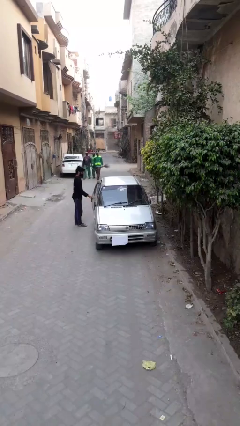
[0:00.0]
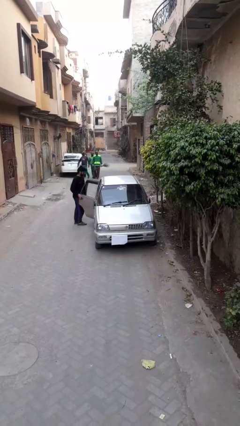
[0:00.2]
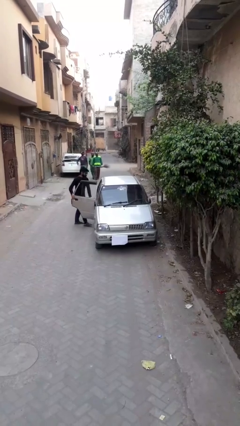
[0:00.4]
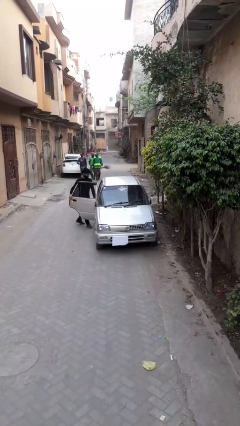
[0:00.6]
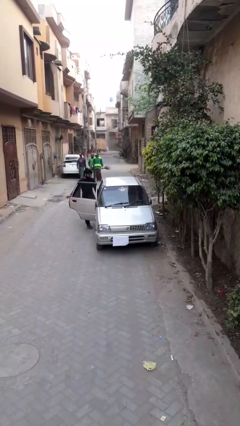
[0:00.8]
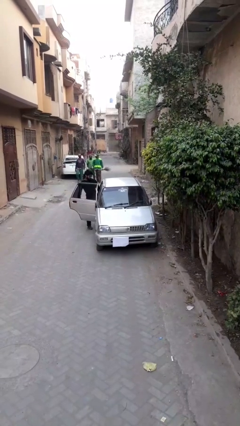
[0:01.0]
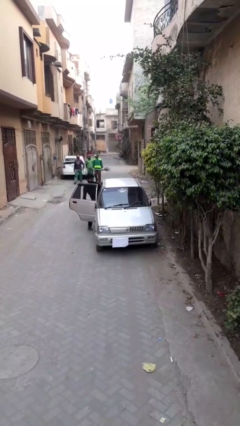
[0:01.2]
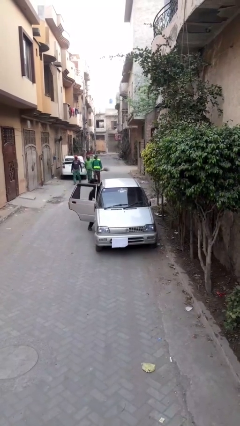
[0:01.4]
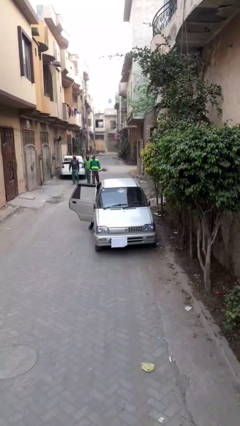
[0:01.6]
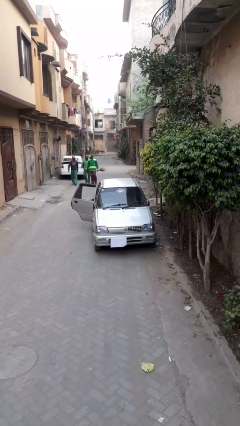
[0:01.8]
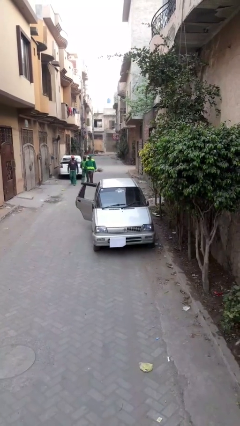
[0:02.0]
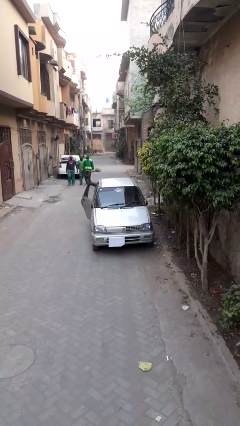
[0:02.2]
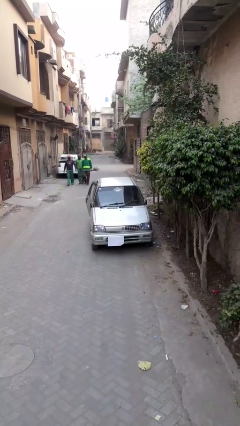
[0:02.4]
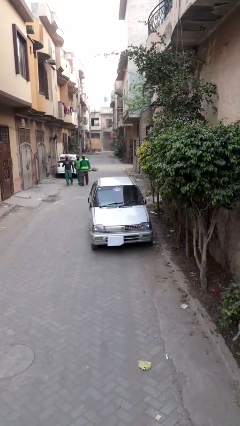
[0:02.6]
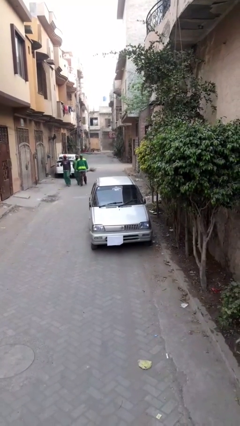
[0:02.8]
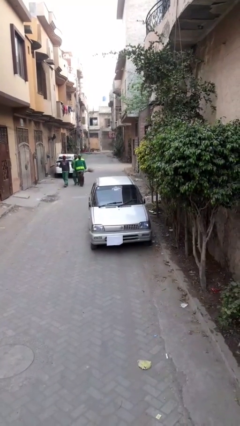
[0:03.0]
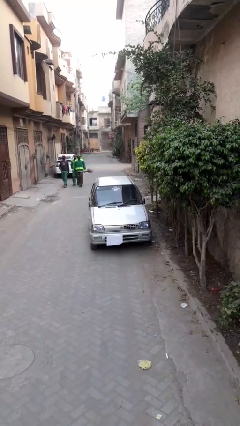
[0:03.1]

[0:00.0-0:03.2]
car picks up person

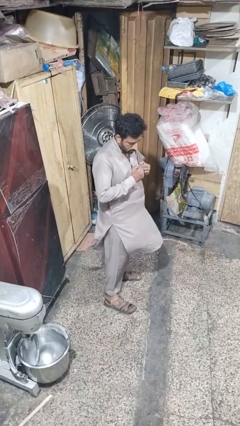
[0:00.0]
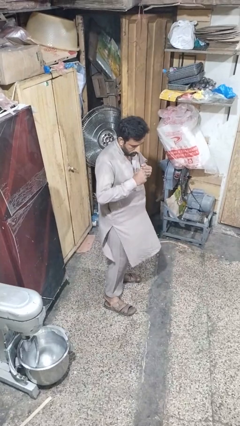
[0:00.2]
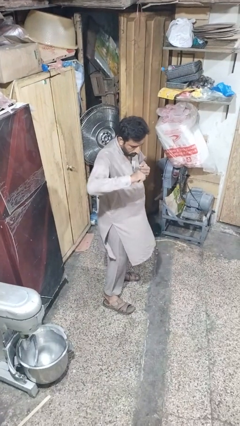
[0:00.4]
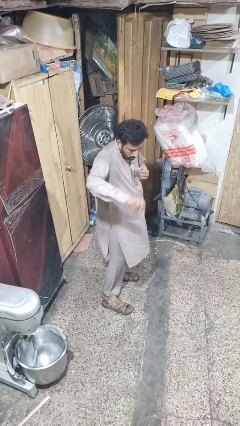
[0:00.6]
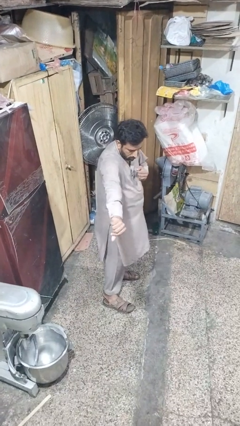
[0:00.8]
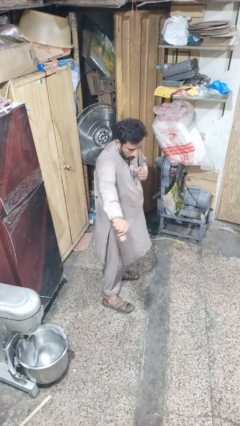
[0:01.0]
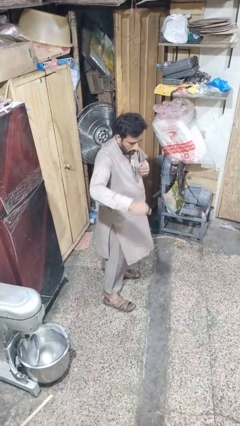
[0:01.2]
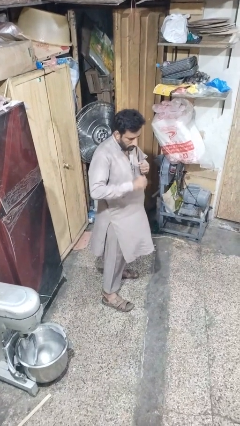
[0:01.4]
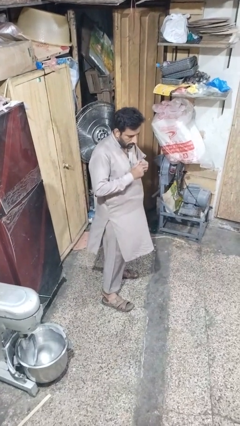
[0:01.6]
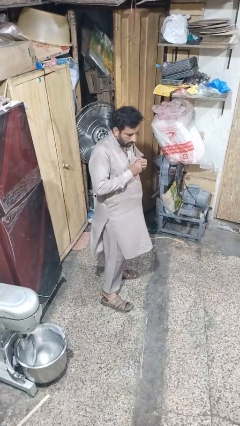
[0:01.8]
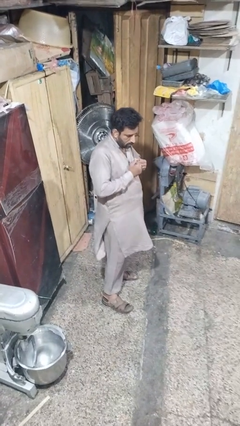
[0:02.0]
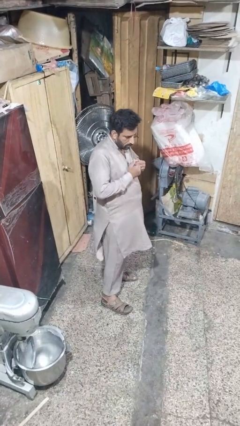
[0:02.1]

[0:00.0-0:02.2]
person karate chop

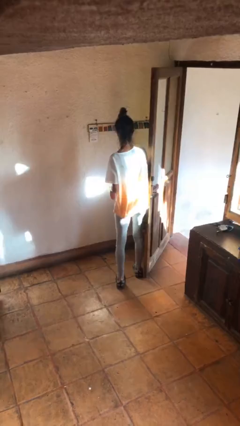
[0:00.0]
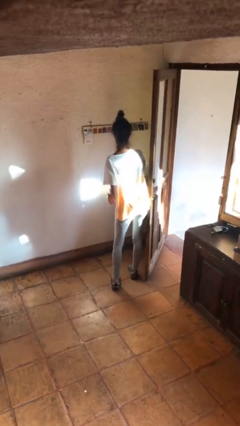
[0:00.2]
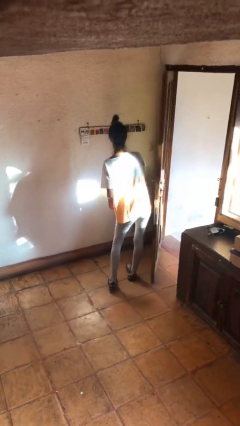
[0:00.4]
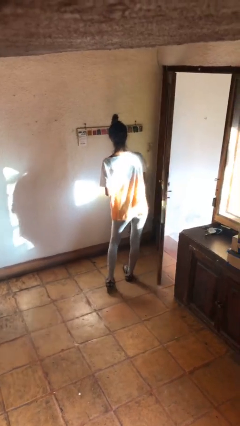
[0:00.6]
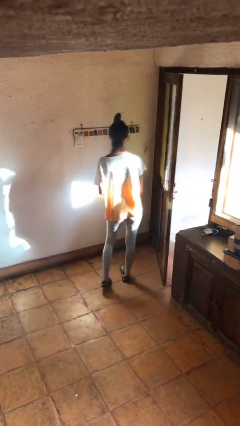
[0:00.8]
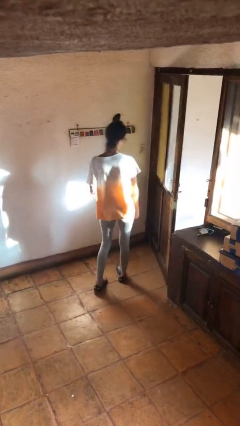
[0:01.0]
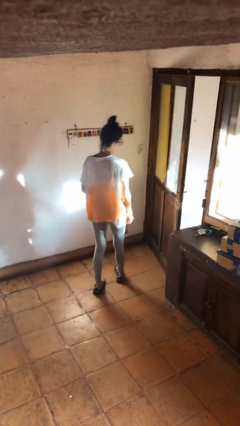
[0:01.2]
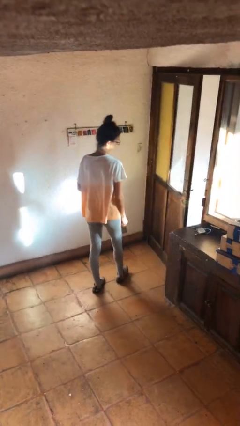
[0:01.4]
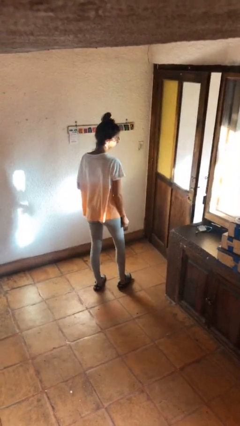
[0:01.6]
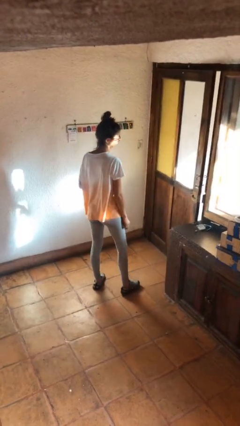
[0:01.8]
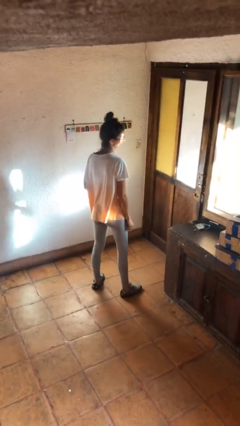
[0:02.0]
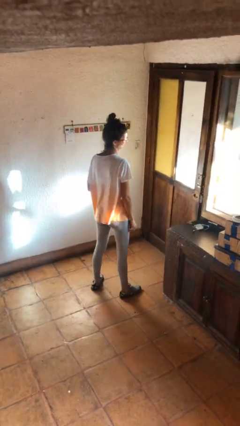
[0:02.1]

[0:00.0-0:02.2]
person closes door with hip

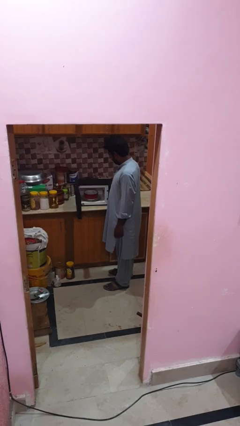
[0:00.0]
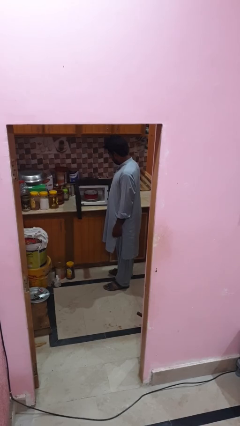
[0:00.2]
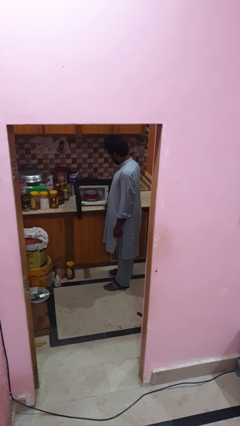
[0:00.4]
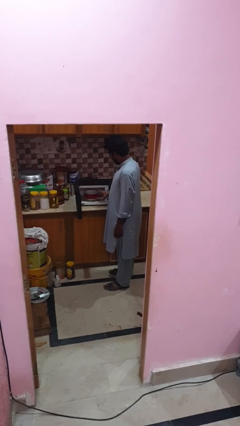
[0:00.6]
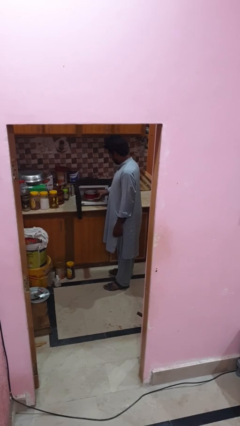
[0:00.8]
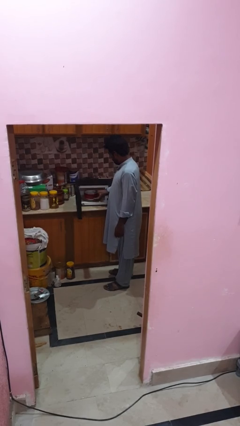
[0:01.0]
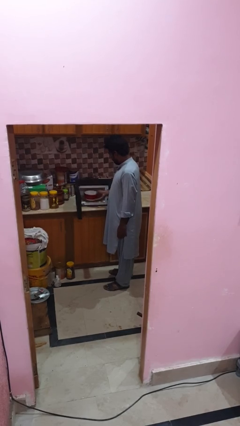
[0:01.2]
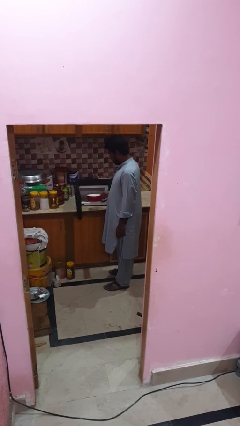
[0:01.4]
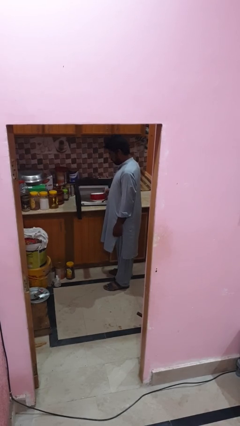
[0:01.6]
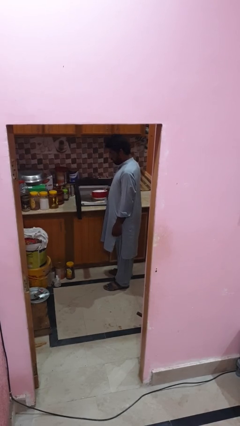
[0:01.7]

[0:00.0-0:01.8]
person takes object from microwave

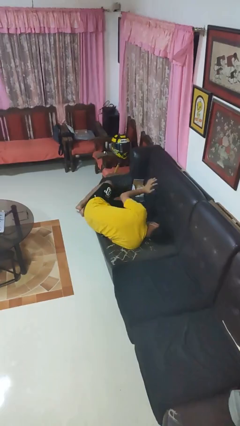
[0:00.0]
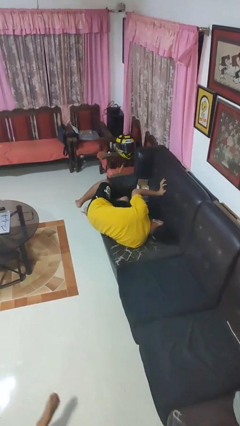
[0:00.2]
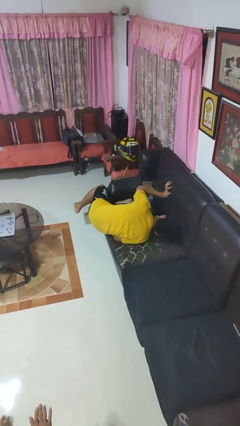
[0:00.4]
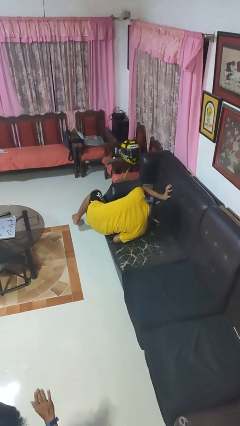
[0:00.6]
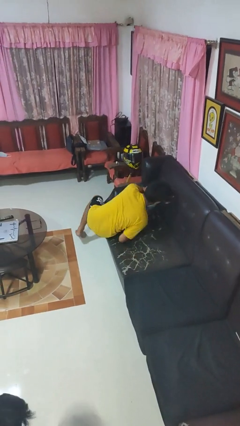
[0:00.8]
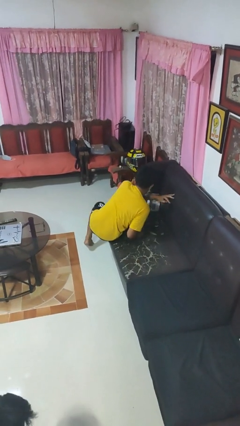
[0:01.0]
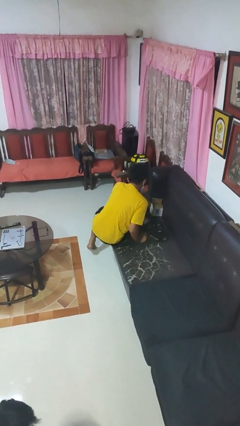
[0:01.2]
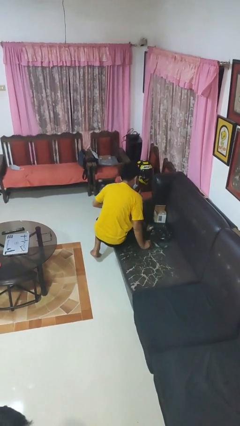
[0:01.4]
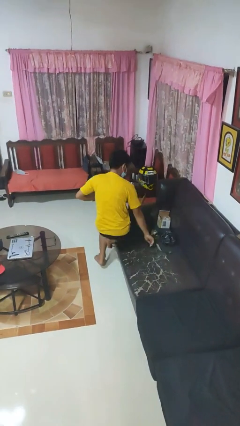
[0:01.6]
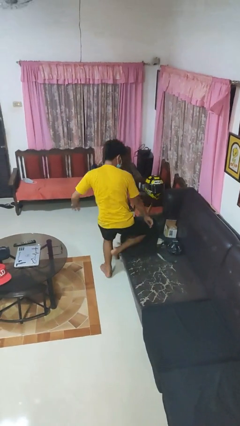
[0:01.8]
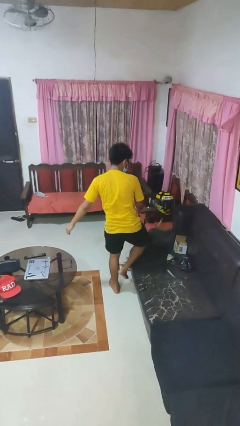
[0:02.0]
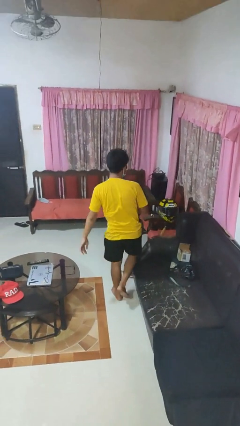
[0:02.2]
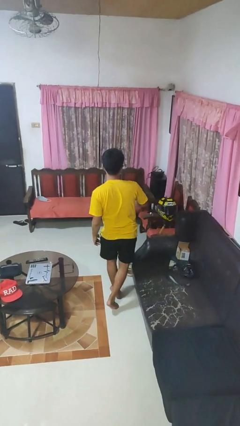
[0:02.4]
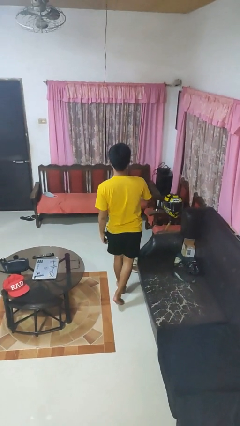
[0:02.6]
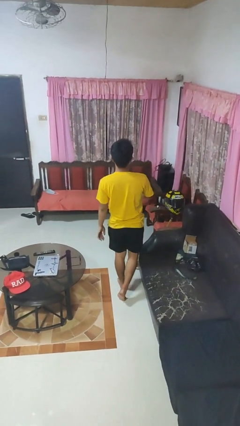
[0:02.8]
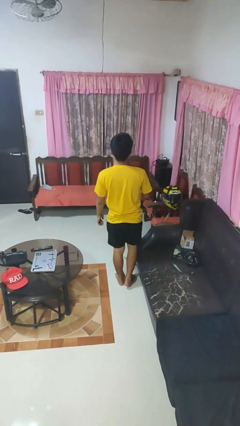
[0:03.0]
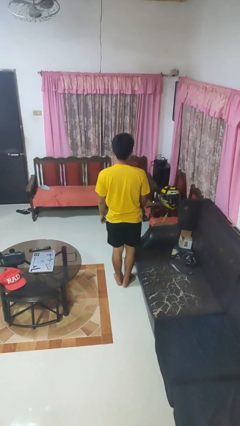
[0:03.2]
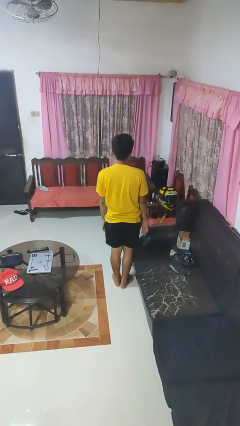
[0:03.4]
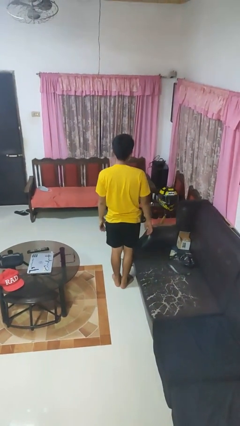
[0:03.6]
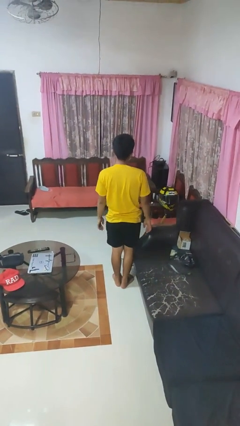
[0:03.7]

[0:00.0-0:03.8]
person stands up

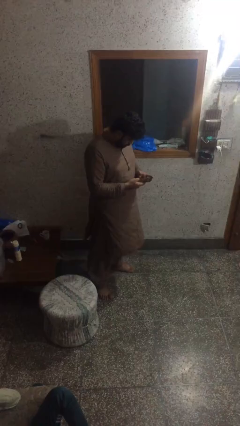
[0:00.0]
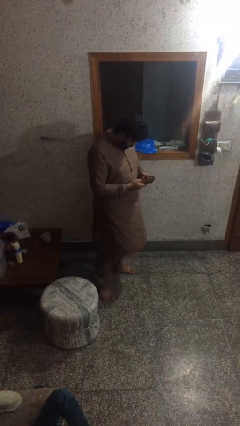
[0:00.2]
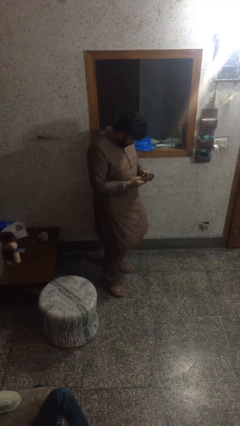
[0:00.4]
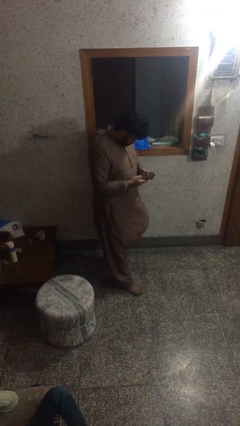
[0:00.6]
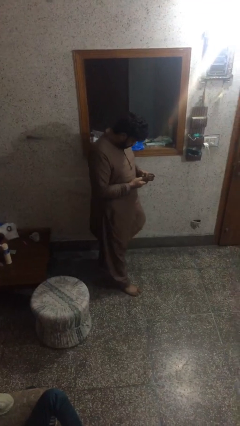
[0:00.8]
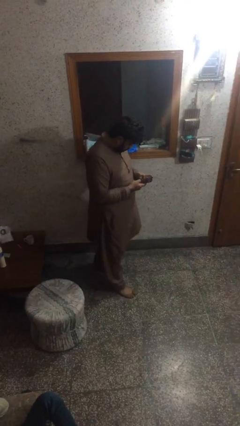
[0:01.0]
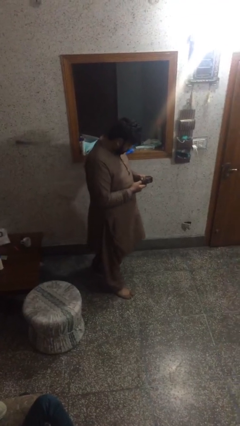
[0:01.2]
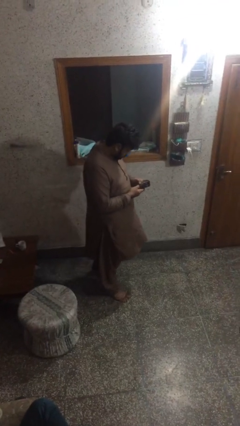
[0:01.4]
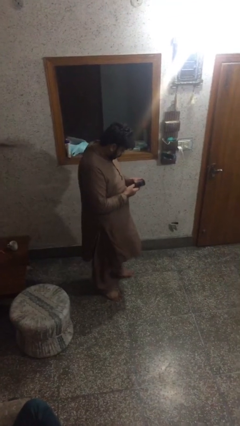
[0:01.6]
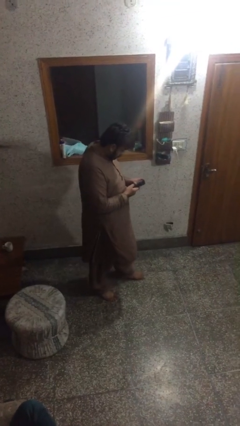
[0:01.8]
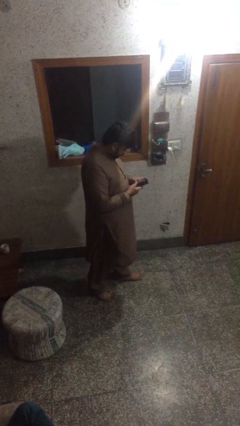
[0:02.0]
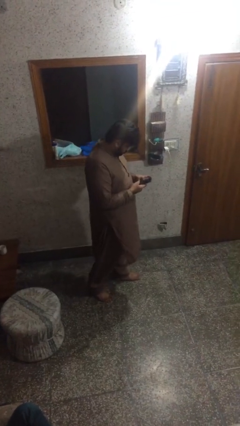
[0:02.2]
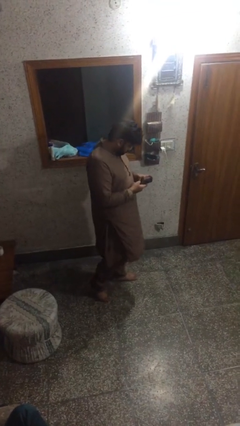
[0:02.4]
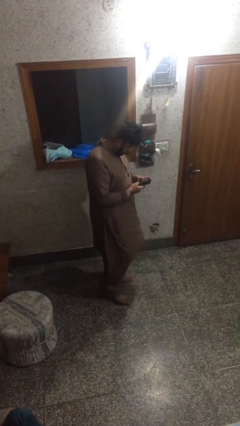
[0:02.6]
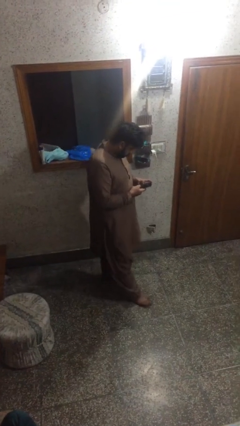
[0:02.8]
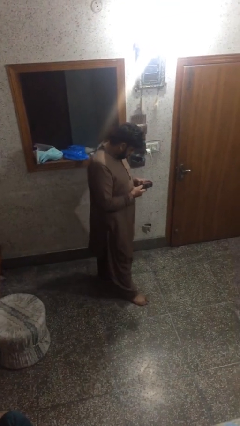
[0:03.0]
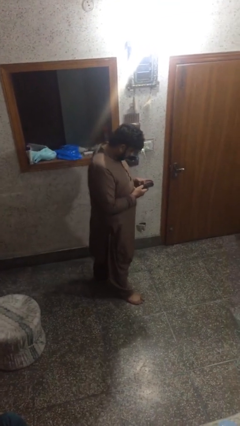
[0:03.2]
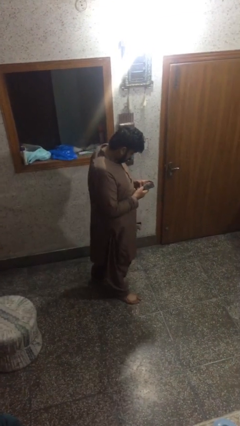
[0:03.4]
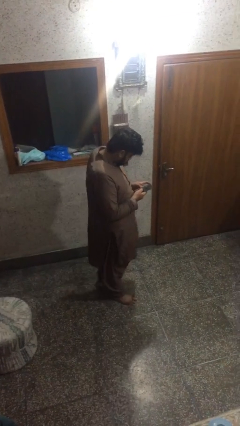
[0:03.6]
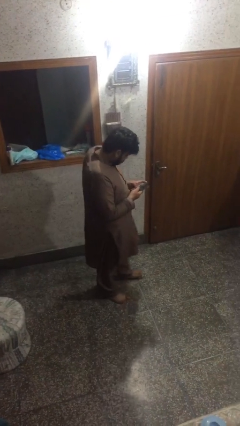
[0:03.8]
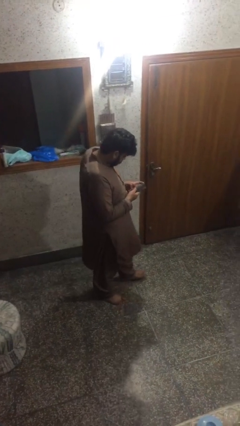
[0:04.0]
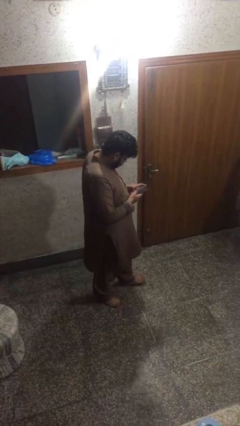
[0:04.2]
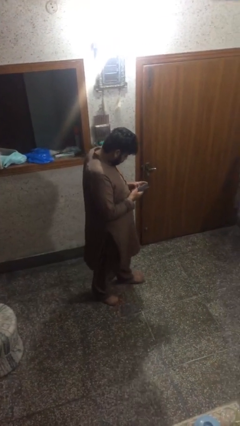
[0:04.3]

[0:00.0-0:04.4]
person texts on phone
